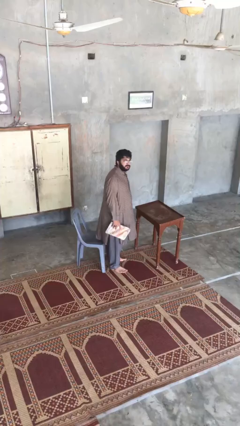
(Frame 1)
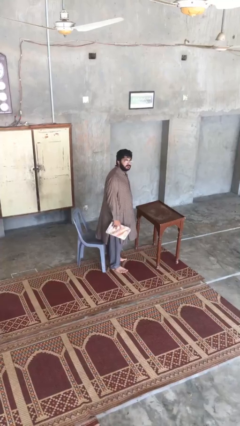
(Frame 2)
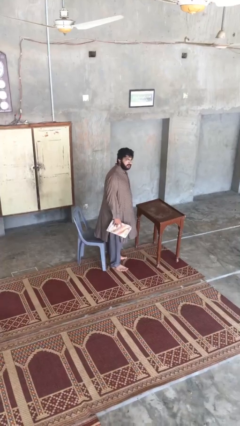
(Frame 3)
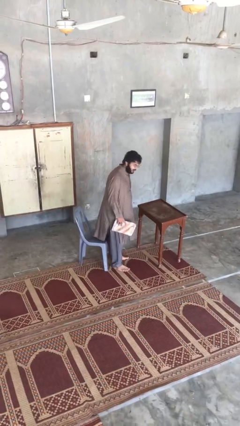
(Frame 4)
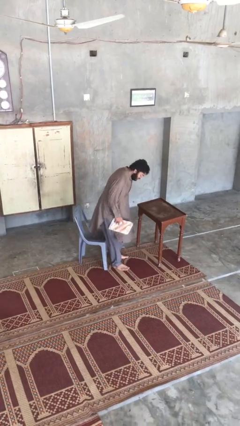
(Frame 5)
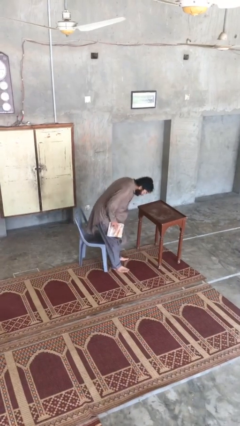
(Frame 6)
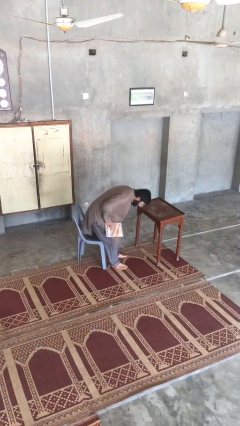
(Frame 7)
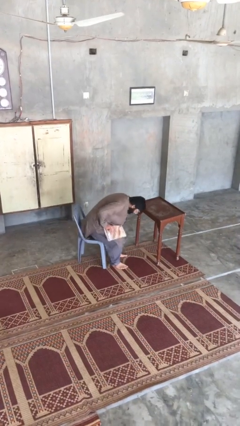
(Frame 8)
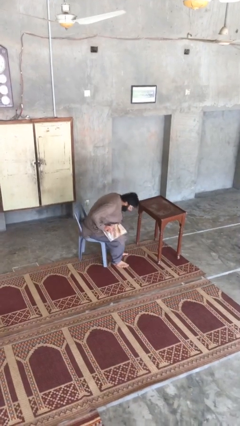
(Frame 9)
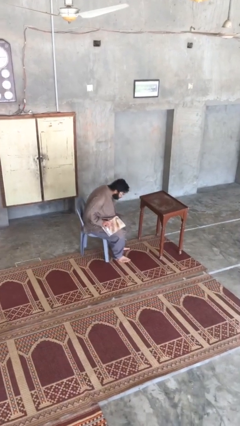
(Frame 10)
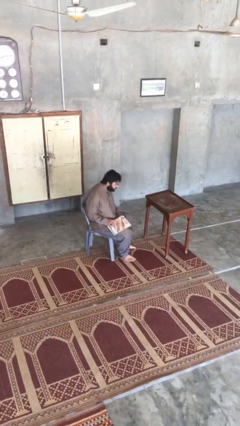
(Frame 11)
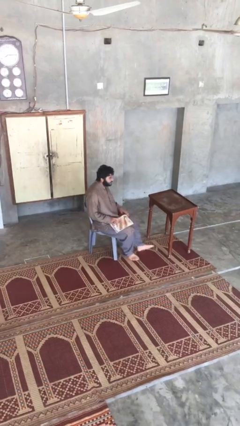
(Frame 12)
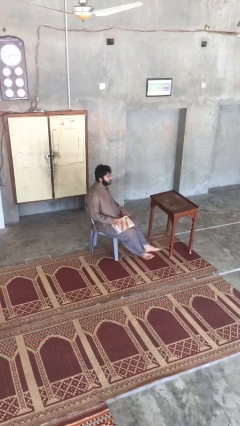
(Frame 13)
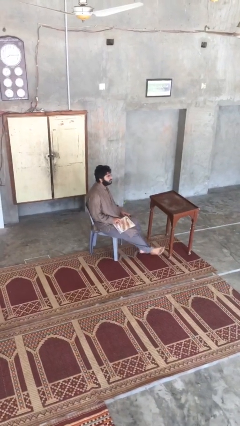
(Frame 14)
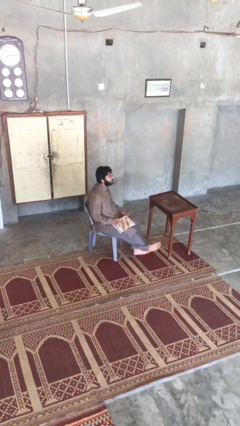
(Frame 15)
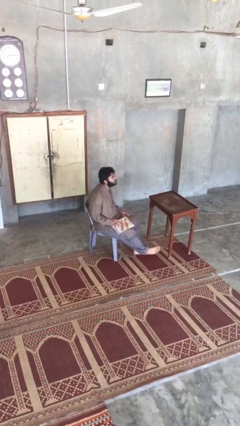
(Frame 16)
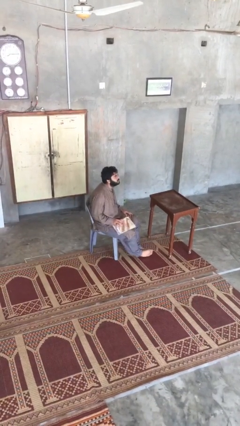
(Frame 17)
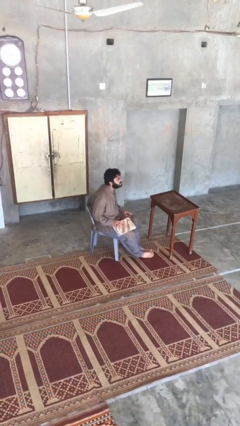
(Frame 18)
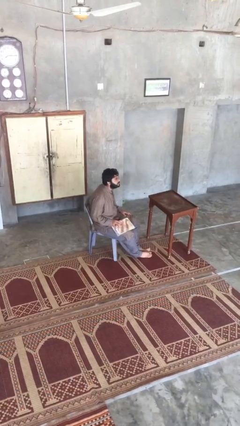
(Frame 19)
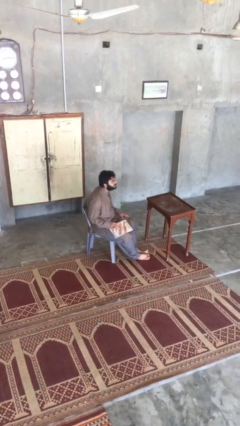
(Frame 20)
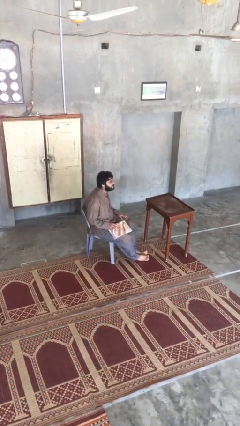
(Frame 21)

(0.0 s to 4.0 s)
person sits down

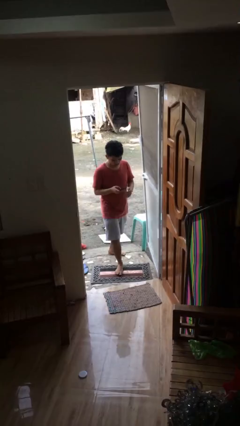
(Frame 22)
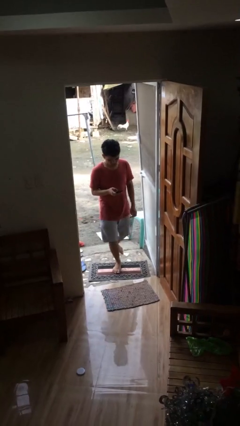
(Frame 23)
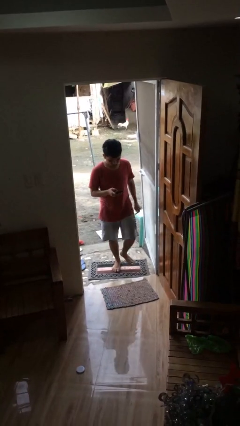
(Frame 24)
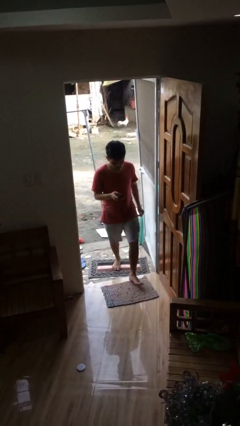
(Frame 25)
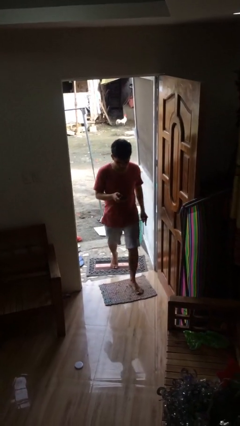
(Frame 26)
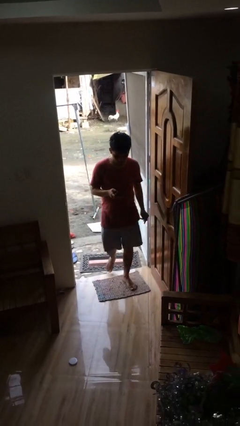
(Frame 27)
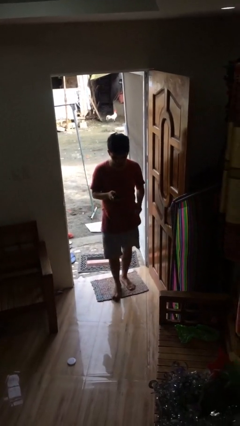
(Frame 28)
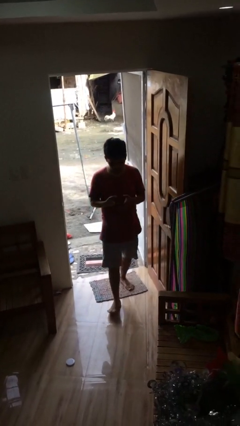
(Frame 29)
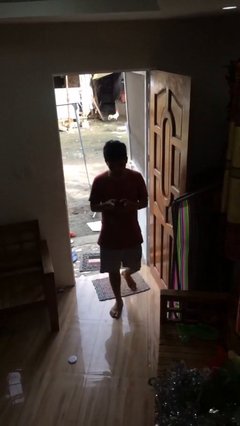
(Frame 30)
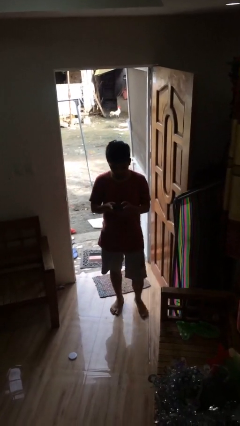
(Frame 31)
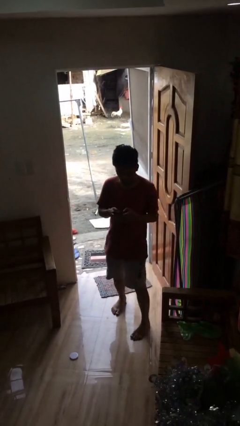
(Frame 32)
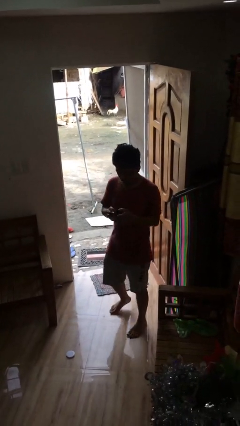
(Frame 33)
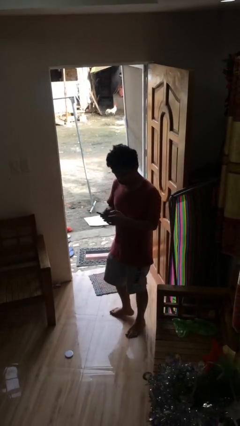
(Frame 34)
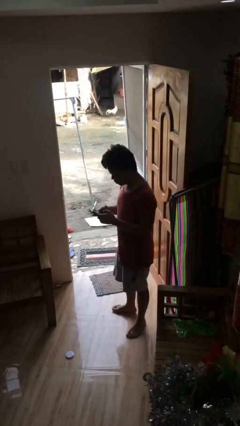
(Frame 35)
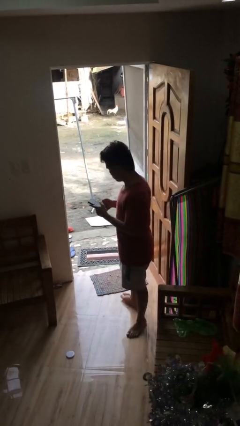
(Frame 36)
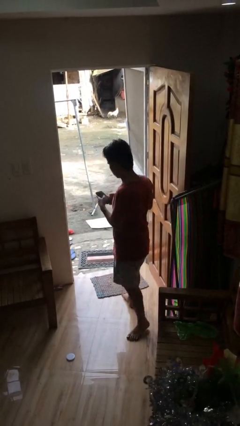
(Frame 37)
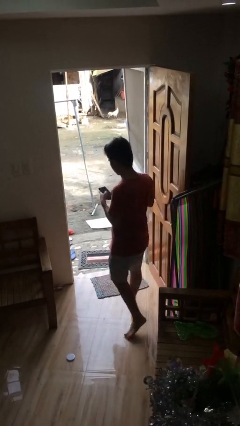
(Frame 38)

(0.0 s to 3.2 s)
person enters scene through structure

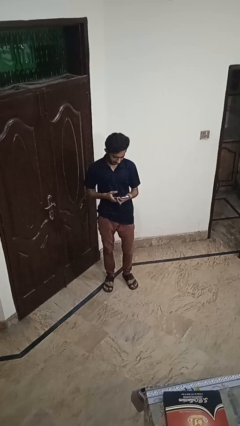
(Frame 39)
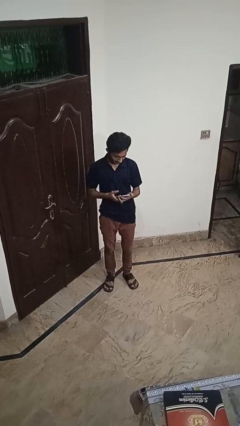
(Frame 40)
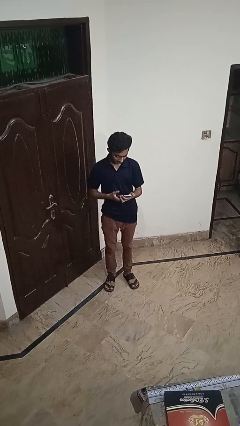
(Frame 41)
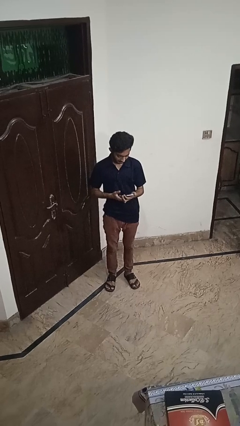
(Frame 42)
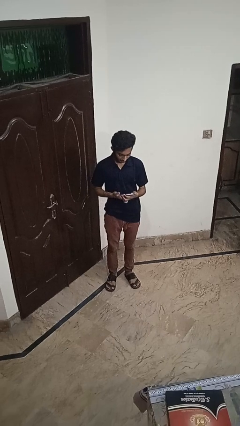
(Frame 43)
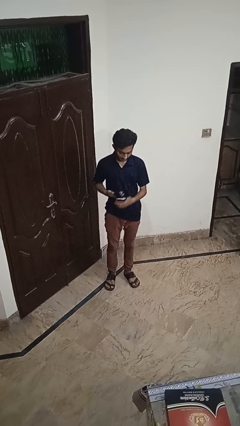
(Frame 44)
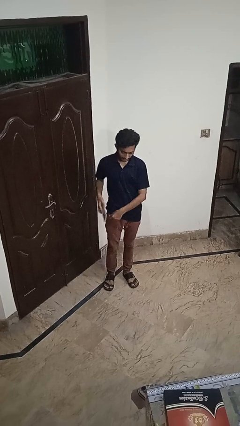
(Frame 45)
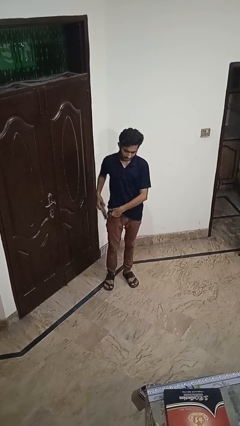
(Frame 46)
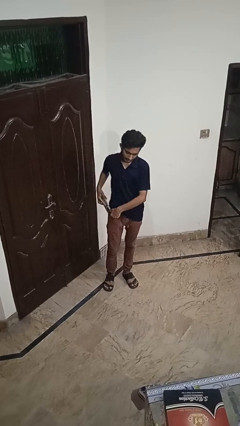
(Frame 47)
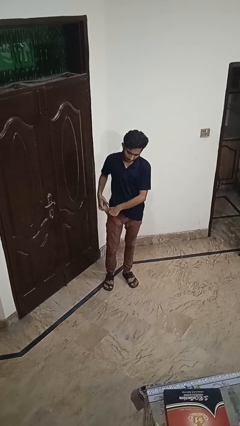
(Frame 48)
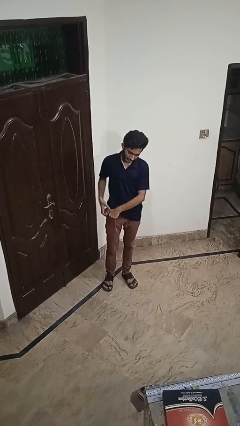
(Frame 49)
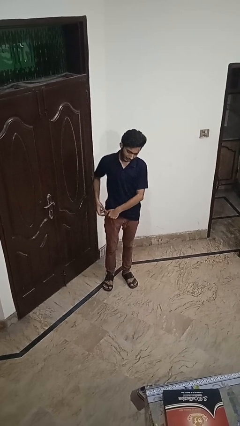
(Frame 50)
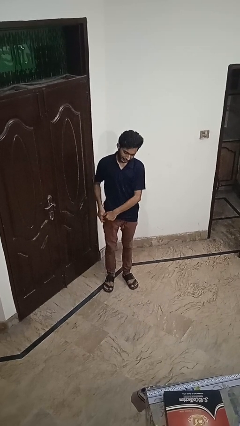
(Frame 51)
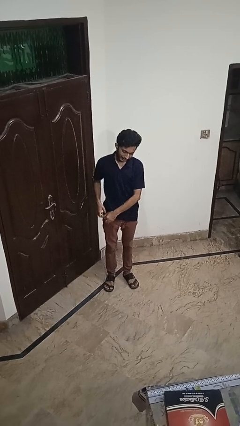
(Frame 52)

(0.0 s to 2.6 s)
person puts phone into pocket

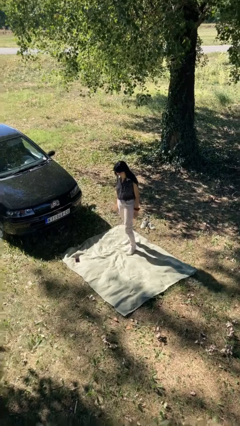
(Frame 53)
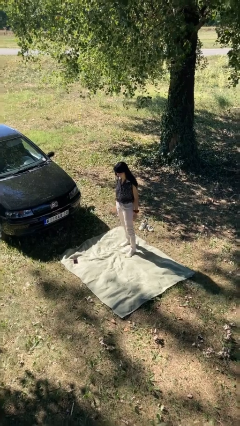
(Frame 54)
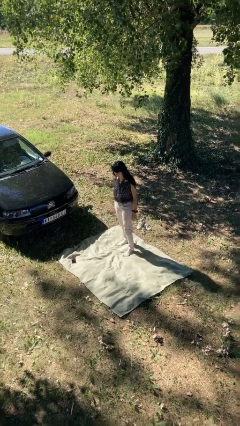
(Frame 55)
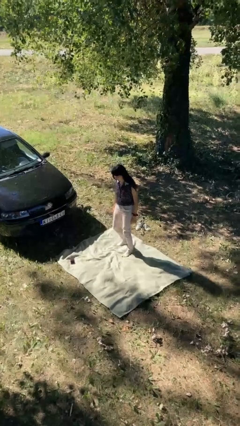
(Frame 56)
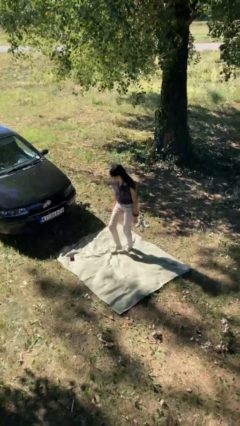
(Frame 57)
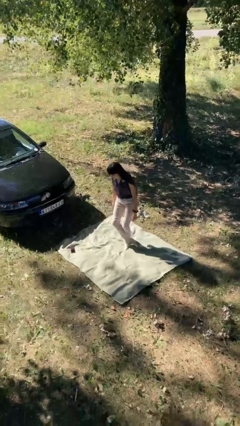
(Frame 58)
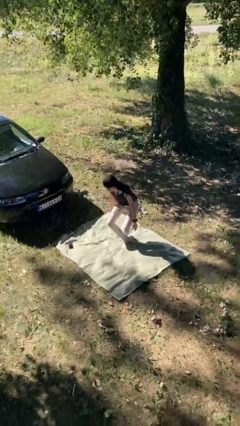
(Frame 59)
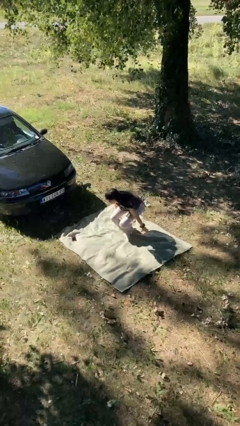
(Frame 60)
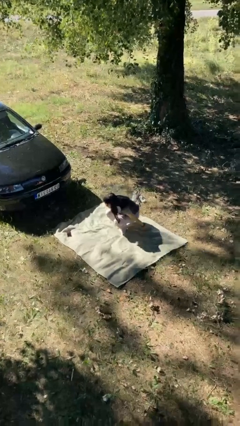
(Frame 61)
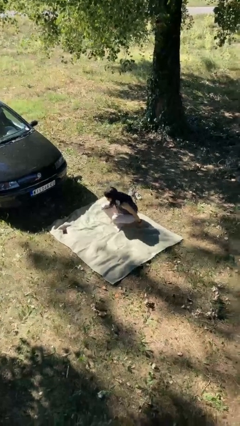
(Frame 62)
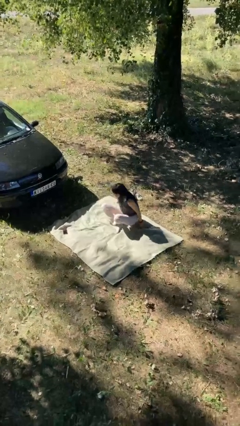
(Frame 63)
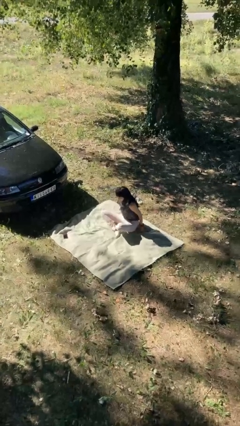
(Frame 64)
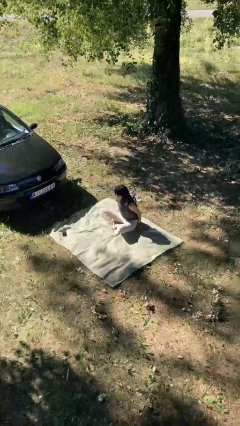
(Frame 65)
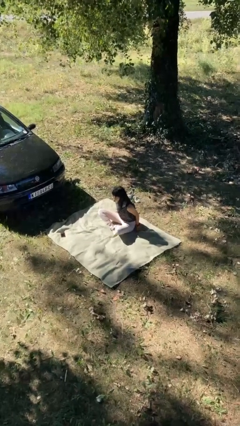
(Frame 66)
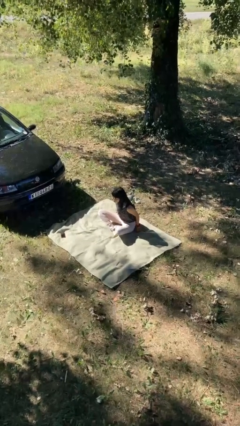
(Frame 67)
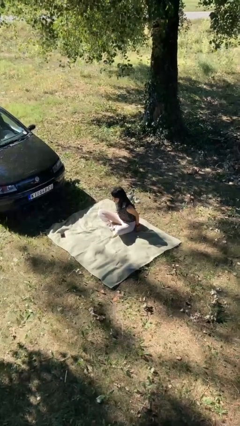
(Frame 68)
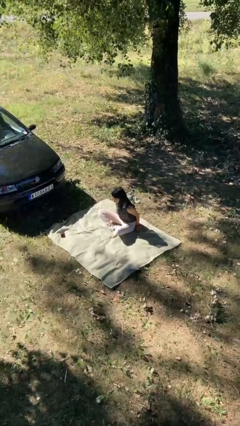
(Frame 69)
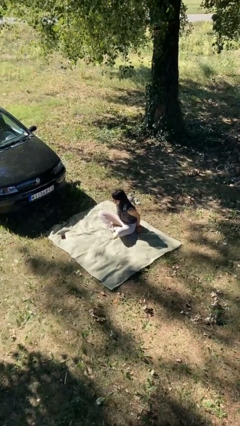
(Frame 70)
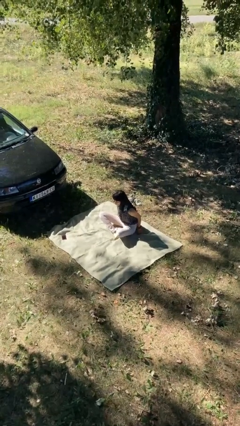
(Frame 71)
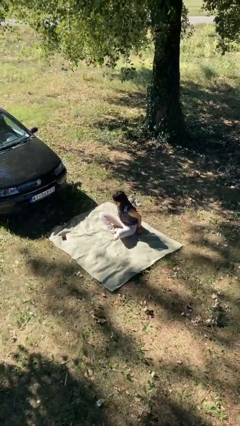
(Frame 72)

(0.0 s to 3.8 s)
person sits crisscross

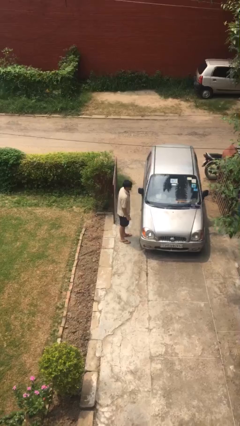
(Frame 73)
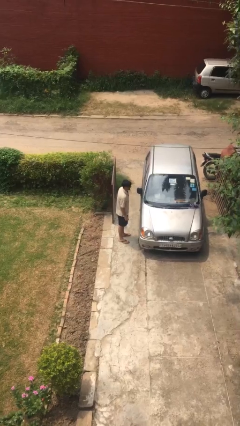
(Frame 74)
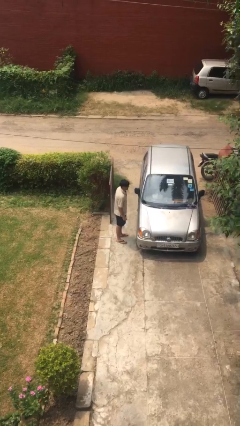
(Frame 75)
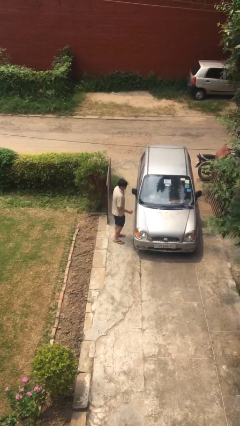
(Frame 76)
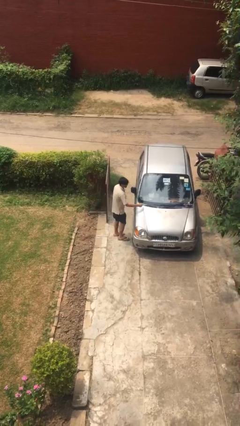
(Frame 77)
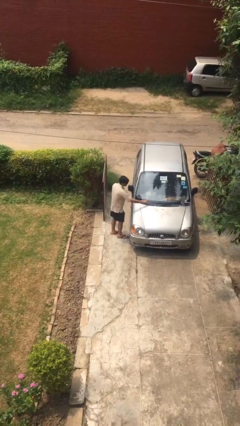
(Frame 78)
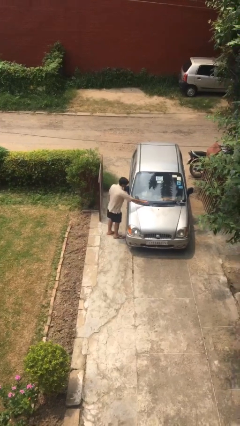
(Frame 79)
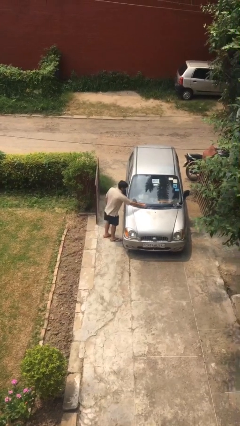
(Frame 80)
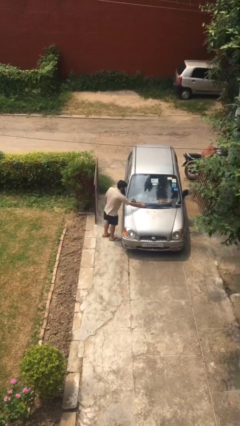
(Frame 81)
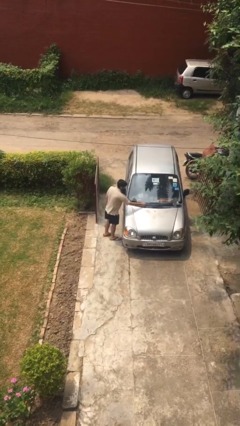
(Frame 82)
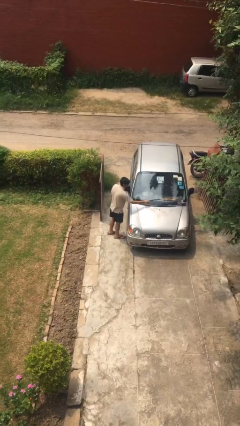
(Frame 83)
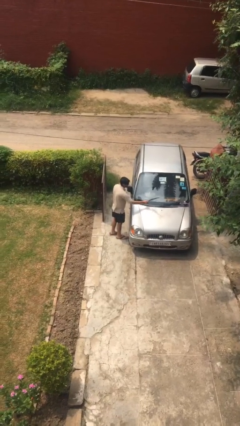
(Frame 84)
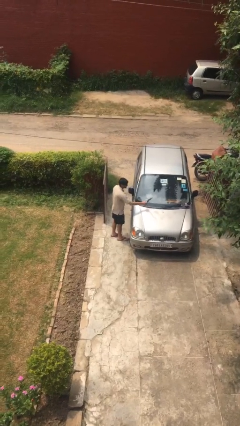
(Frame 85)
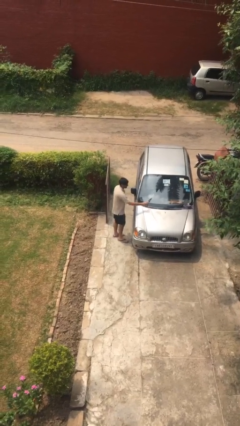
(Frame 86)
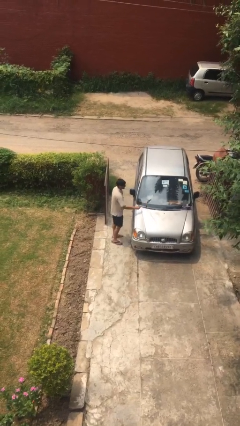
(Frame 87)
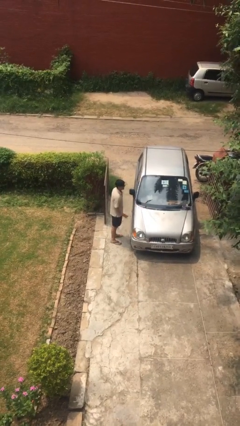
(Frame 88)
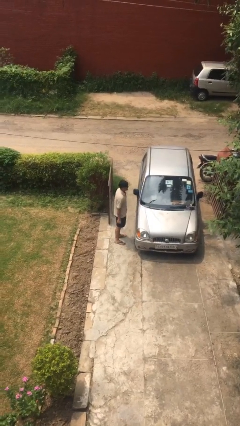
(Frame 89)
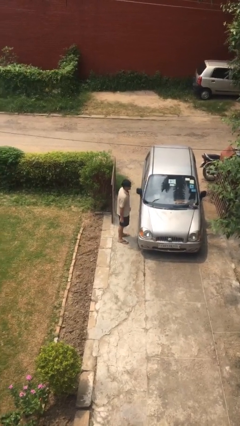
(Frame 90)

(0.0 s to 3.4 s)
person flips up car wipers
